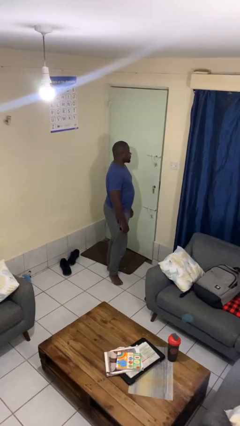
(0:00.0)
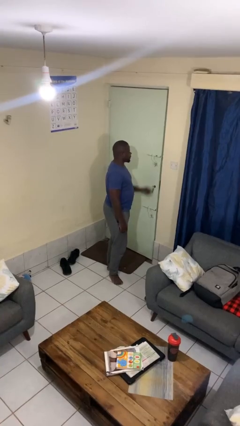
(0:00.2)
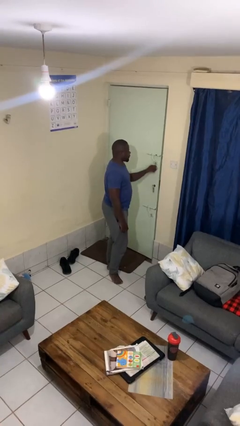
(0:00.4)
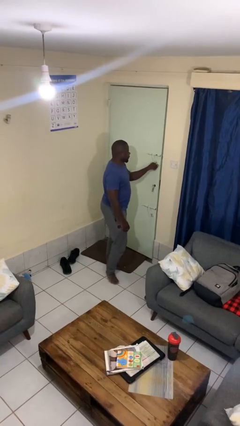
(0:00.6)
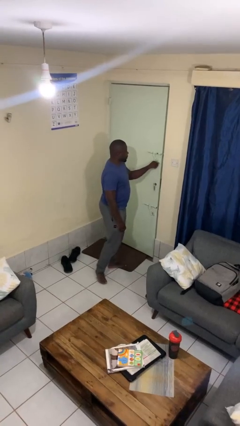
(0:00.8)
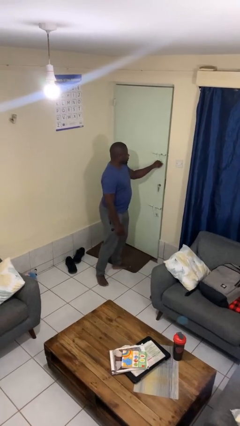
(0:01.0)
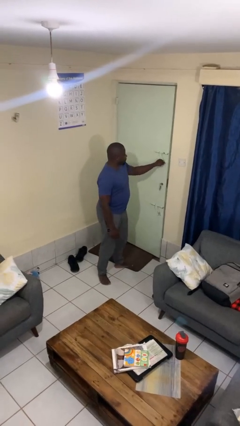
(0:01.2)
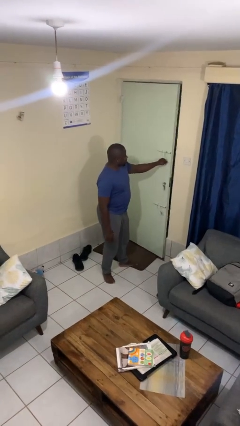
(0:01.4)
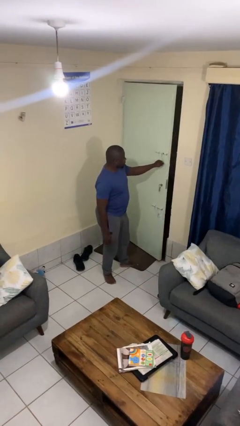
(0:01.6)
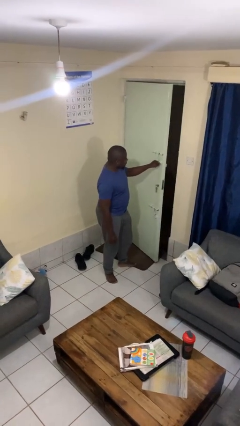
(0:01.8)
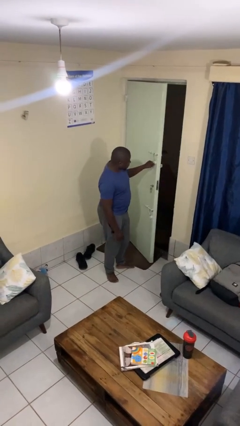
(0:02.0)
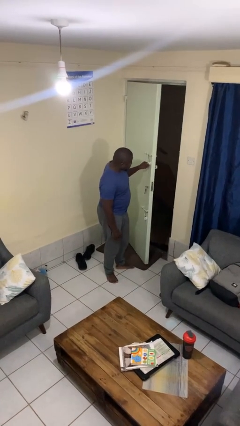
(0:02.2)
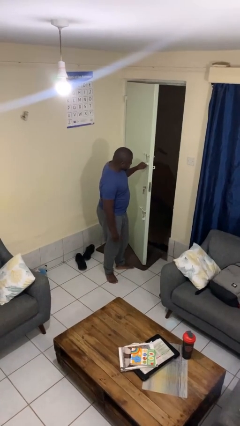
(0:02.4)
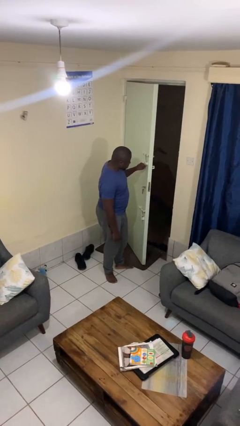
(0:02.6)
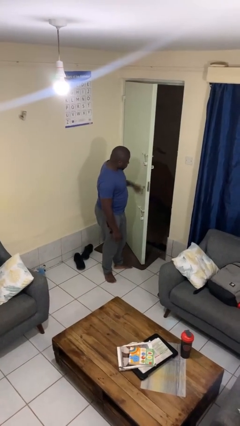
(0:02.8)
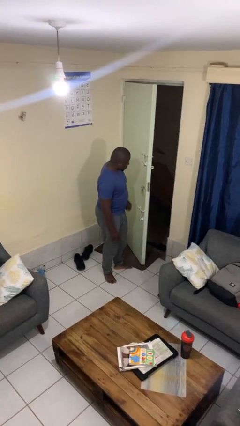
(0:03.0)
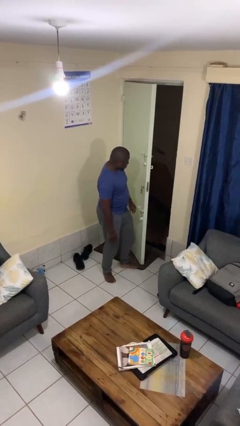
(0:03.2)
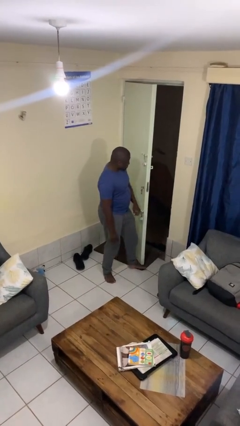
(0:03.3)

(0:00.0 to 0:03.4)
person opens facility door

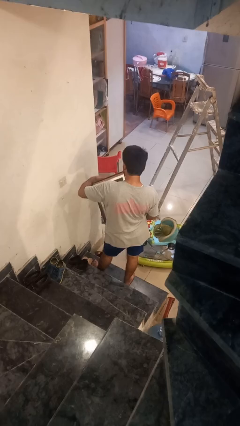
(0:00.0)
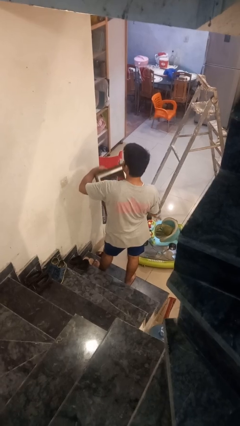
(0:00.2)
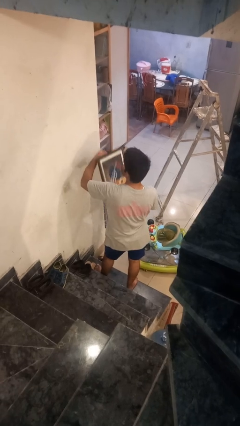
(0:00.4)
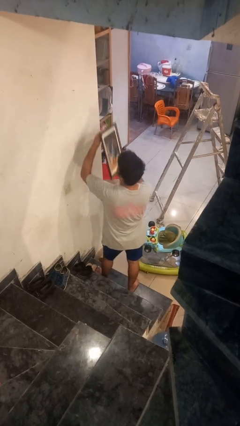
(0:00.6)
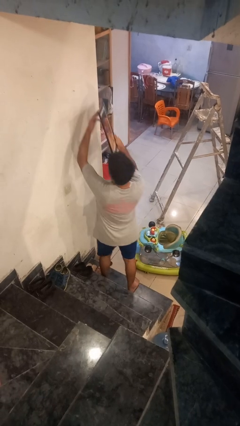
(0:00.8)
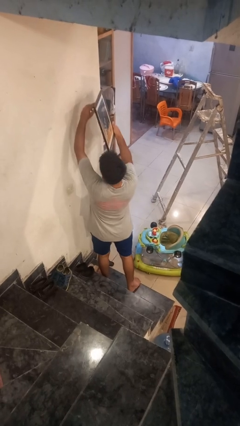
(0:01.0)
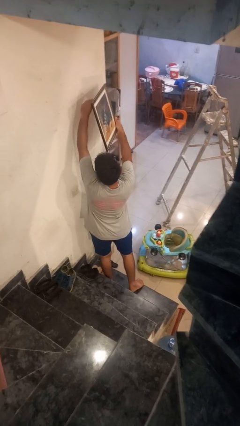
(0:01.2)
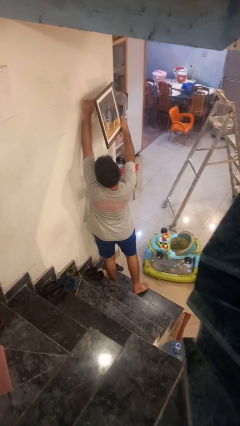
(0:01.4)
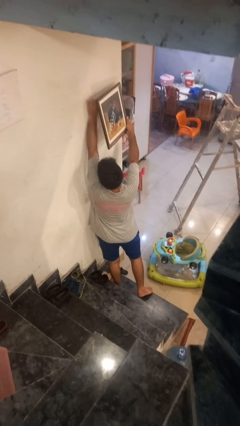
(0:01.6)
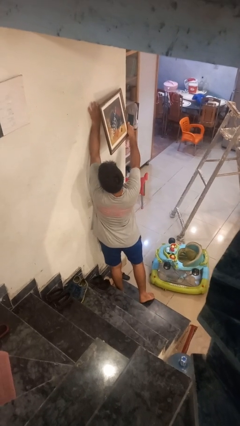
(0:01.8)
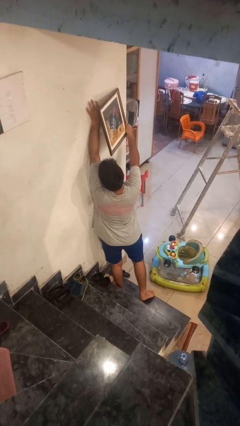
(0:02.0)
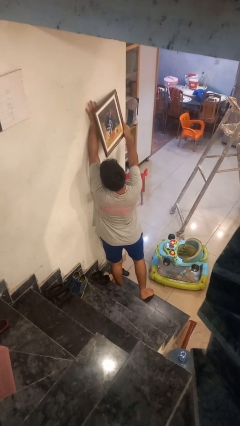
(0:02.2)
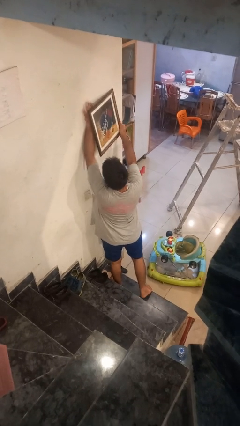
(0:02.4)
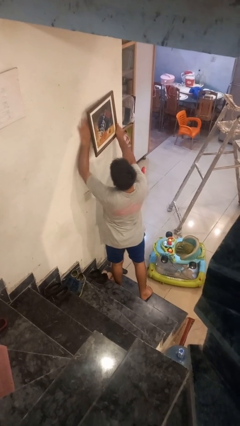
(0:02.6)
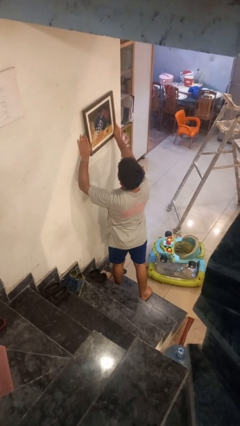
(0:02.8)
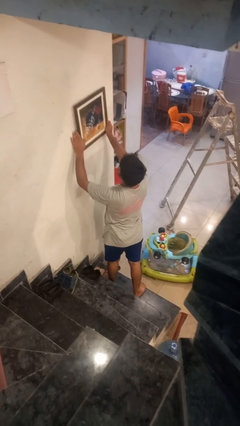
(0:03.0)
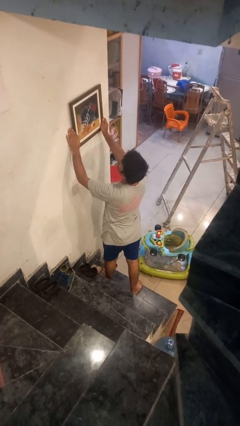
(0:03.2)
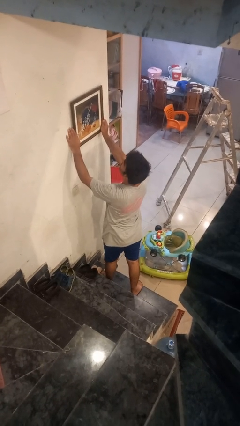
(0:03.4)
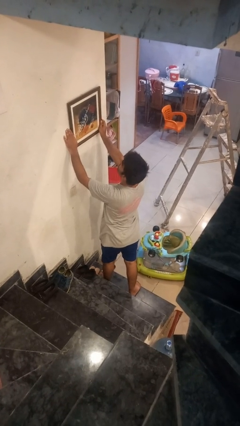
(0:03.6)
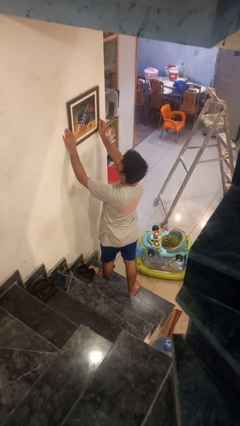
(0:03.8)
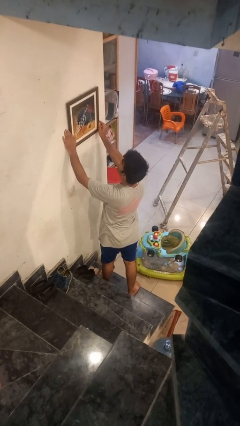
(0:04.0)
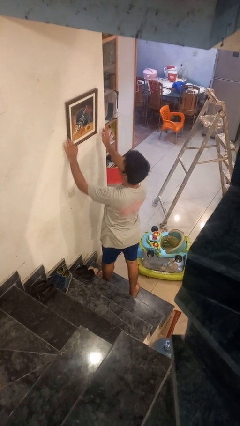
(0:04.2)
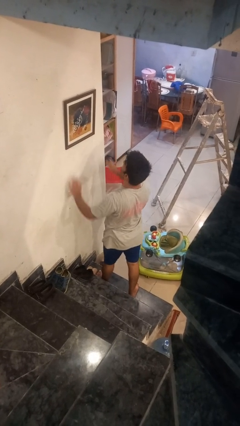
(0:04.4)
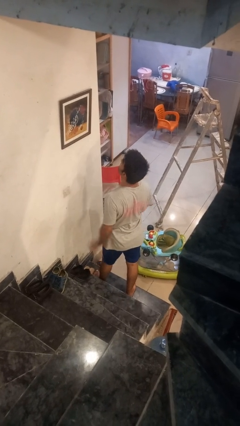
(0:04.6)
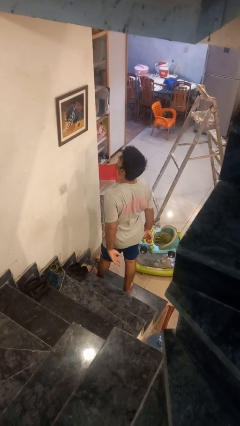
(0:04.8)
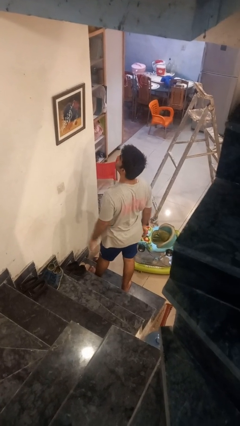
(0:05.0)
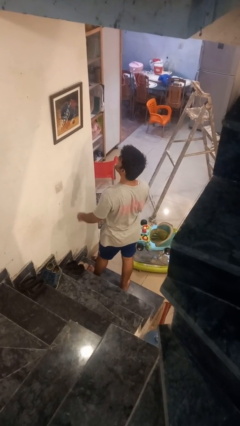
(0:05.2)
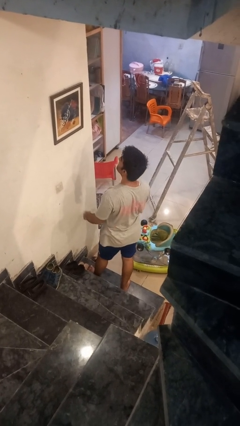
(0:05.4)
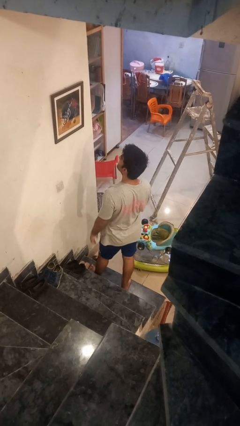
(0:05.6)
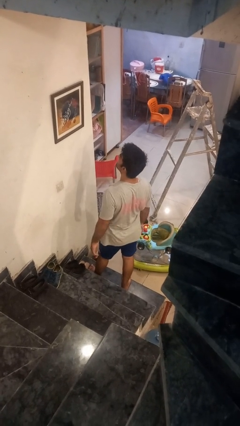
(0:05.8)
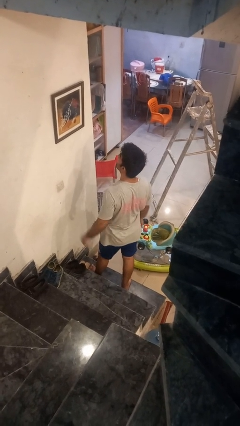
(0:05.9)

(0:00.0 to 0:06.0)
person puts up picture frame

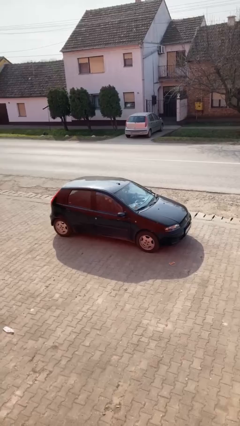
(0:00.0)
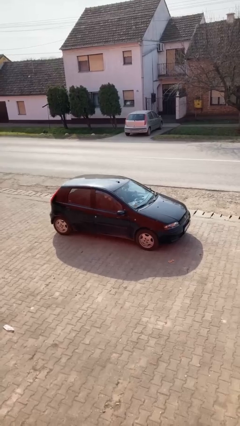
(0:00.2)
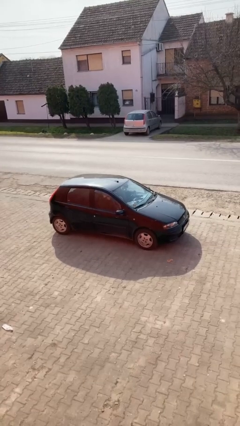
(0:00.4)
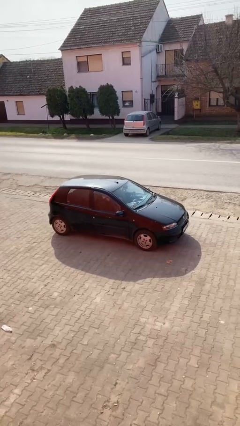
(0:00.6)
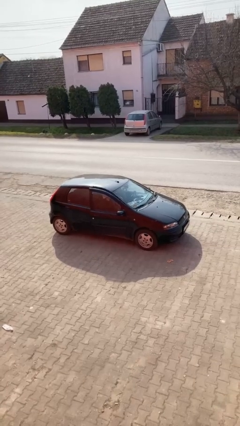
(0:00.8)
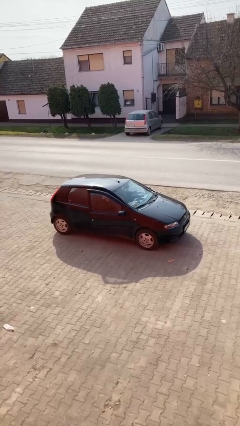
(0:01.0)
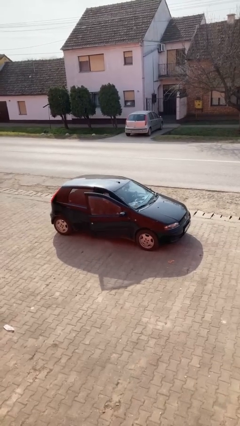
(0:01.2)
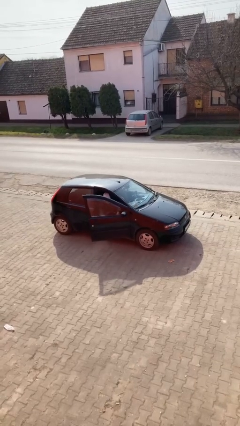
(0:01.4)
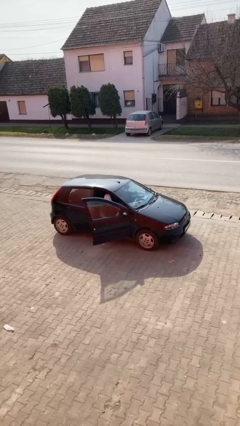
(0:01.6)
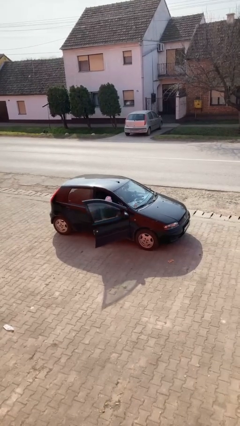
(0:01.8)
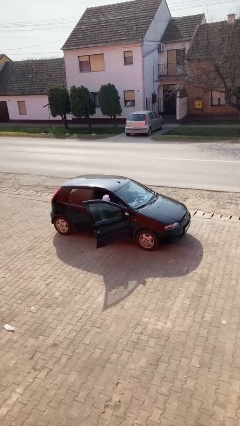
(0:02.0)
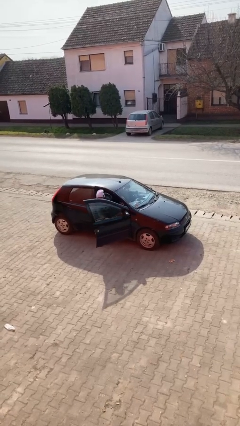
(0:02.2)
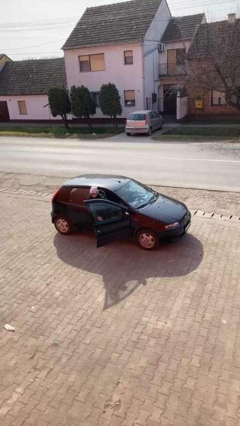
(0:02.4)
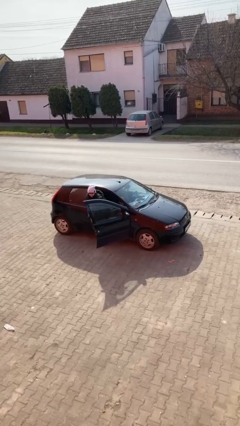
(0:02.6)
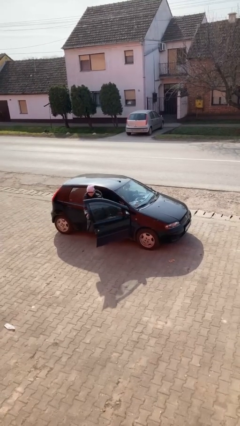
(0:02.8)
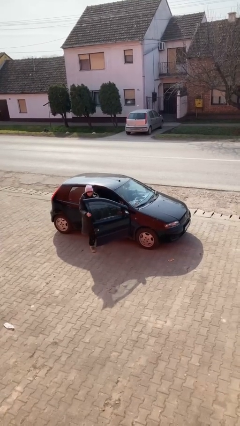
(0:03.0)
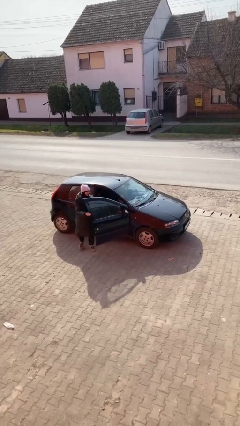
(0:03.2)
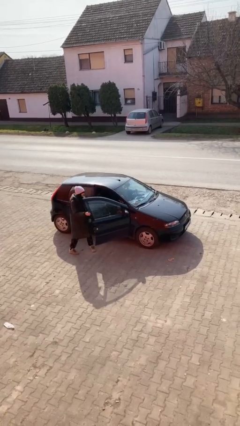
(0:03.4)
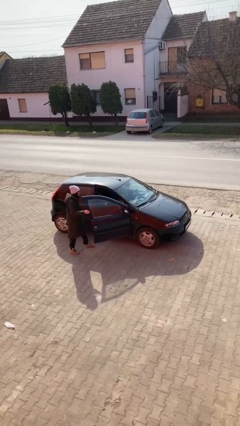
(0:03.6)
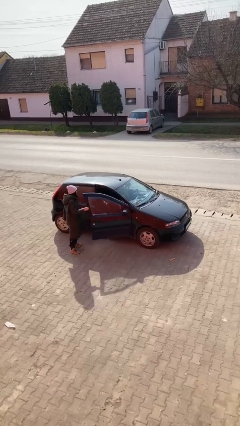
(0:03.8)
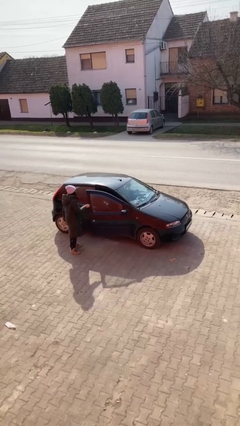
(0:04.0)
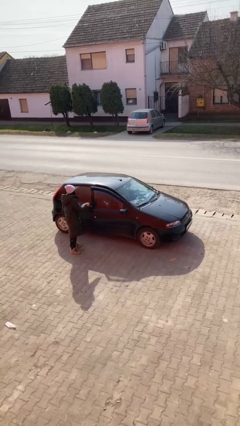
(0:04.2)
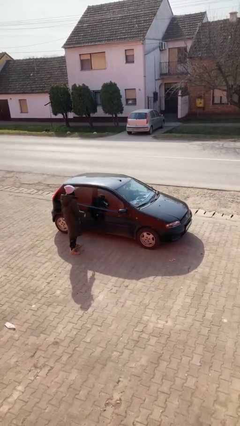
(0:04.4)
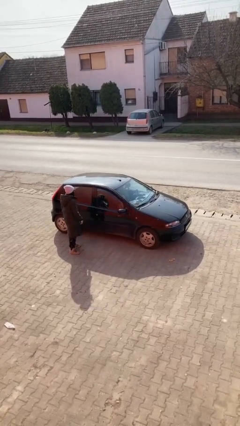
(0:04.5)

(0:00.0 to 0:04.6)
car drops off person

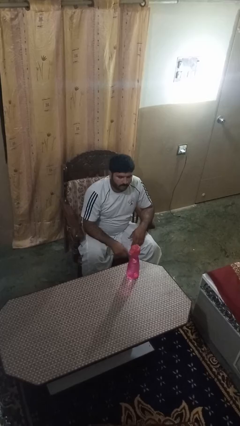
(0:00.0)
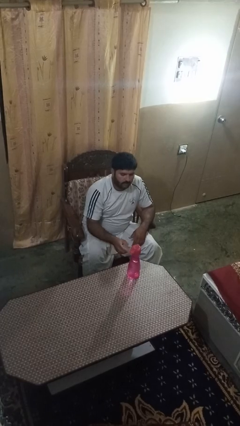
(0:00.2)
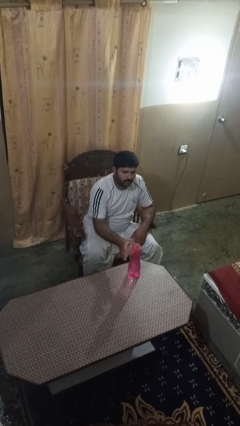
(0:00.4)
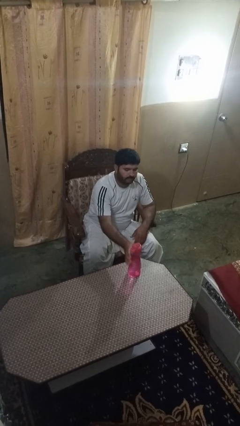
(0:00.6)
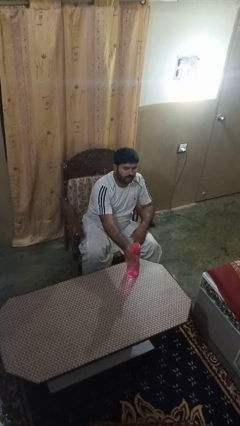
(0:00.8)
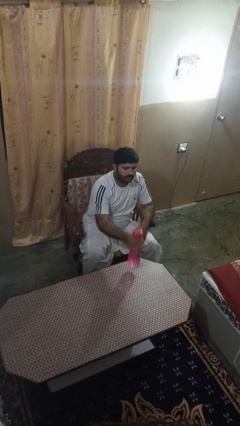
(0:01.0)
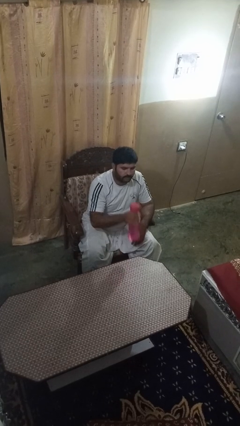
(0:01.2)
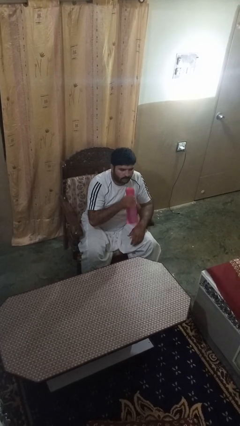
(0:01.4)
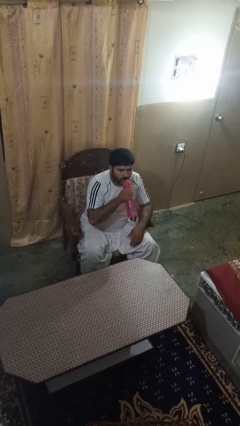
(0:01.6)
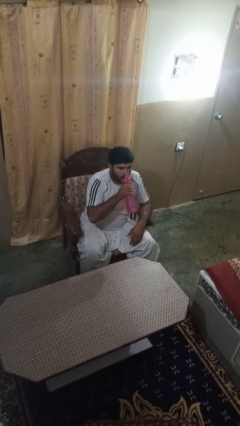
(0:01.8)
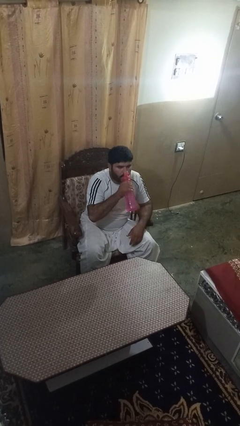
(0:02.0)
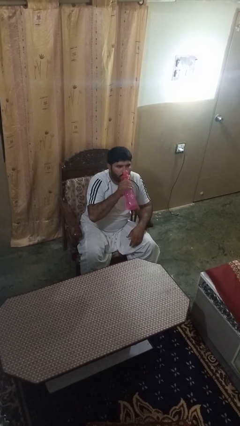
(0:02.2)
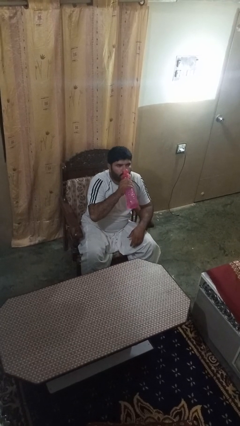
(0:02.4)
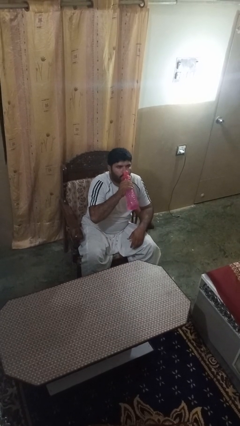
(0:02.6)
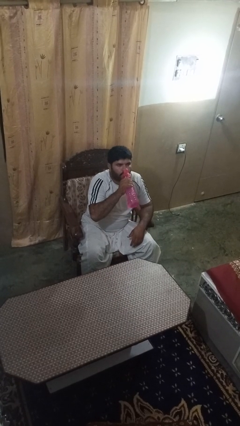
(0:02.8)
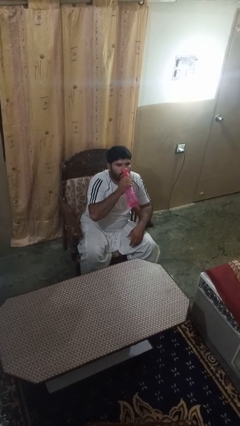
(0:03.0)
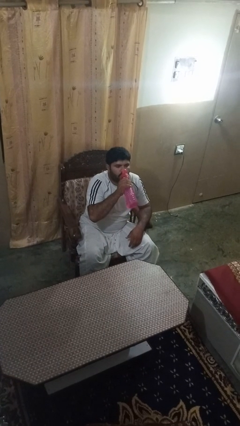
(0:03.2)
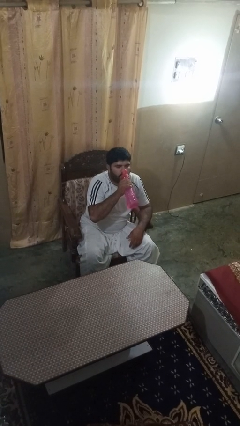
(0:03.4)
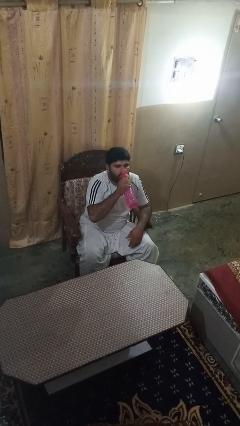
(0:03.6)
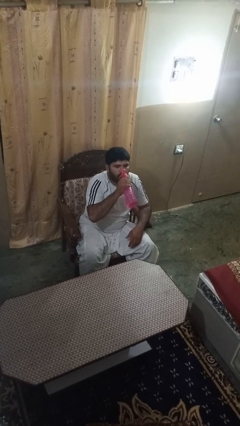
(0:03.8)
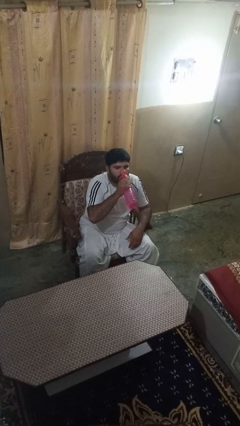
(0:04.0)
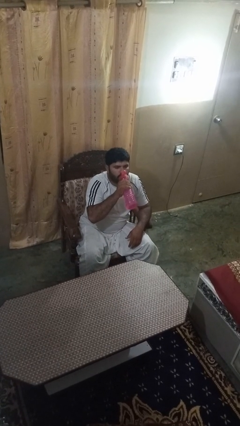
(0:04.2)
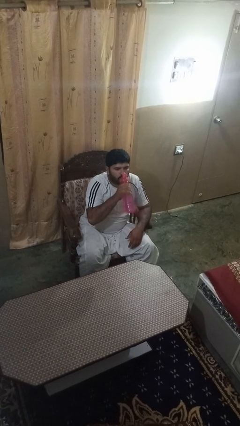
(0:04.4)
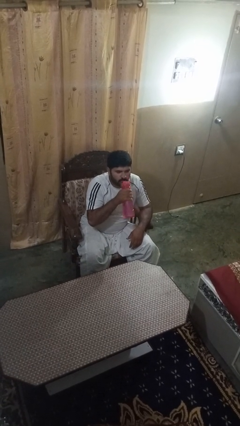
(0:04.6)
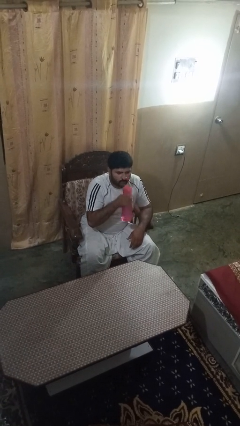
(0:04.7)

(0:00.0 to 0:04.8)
person drinks from bottle
